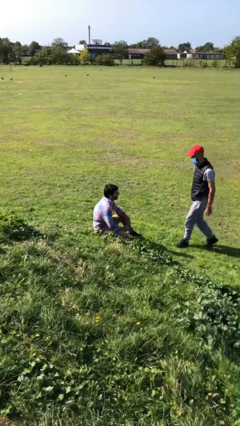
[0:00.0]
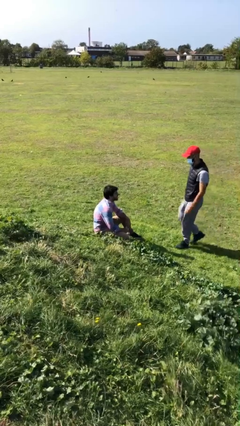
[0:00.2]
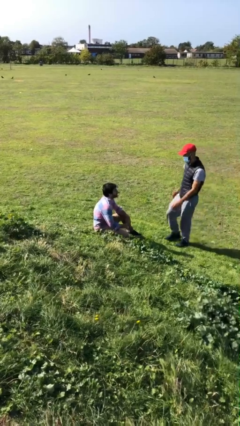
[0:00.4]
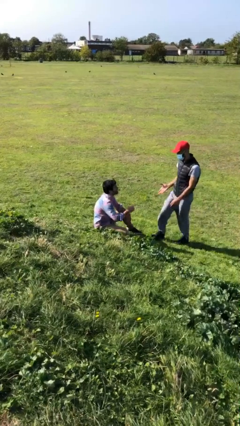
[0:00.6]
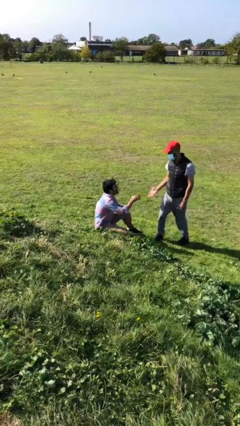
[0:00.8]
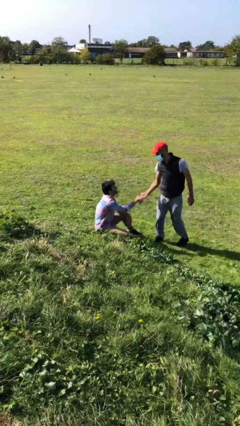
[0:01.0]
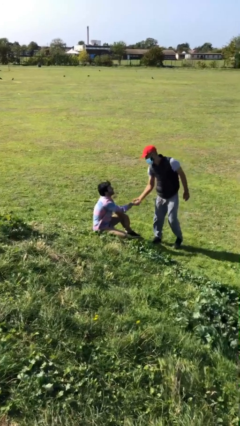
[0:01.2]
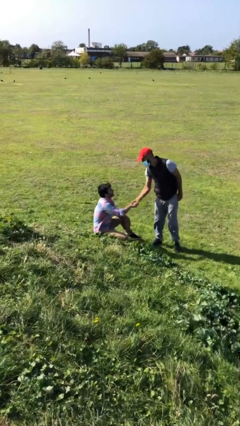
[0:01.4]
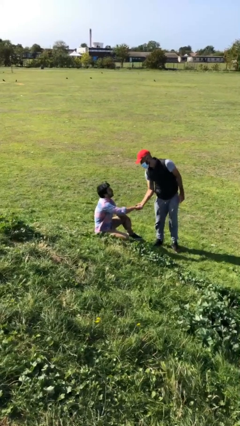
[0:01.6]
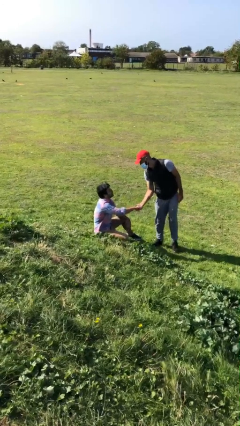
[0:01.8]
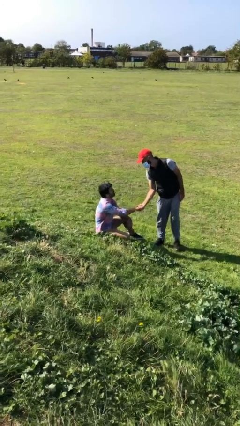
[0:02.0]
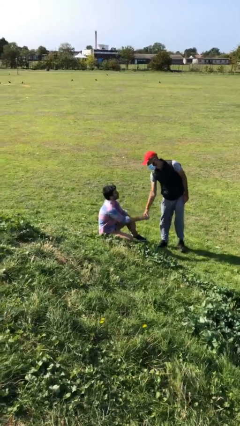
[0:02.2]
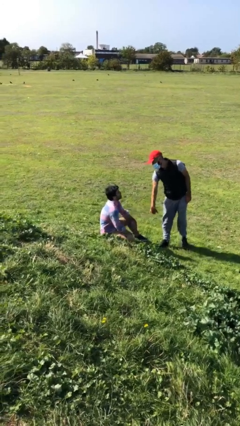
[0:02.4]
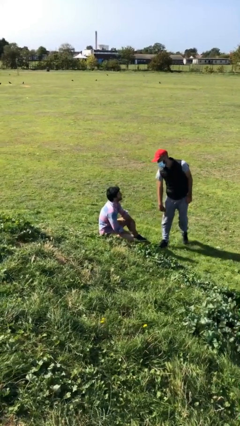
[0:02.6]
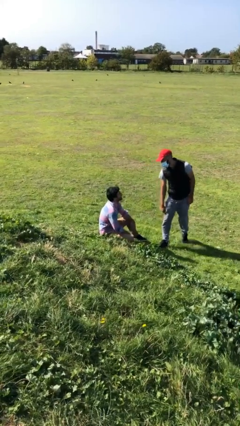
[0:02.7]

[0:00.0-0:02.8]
person shakes hand

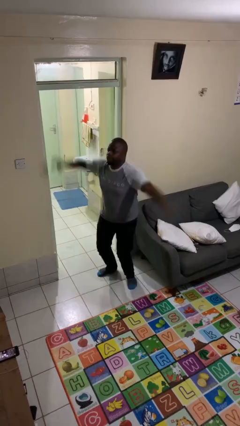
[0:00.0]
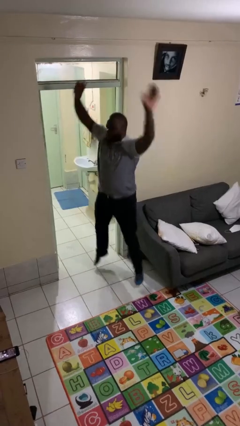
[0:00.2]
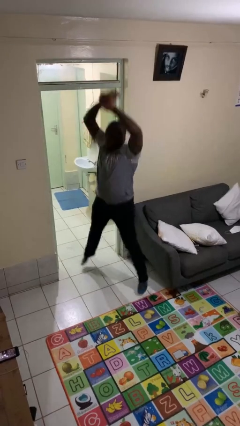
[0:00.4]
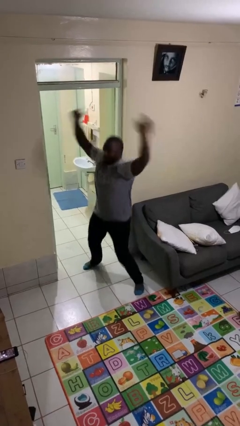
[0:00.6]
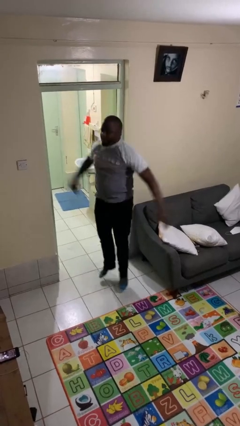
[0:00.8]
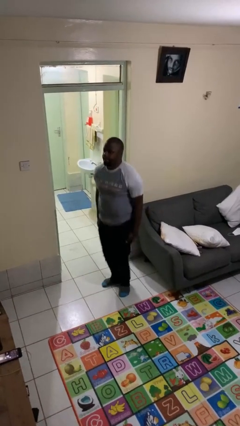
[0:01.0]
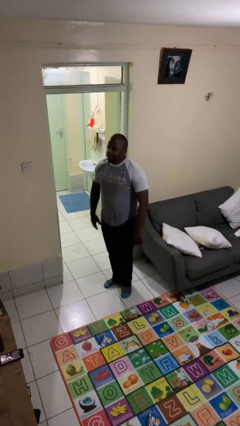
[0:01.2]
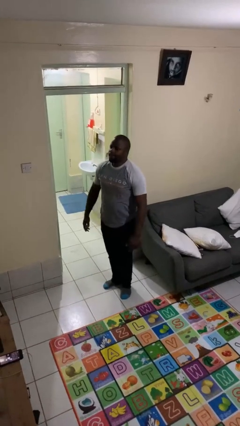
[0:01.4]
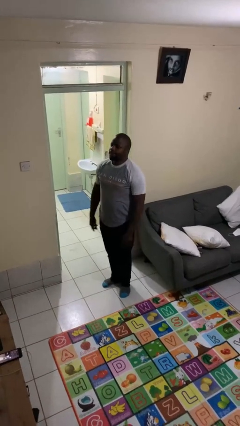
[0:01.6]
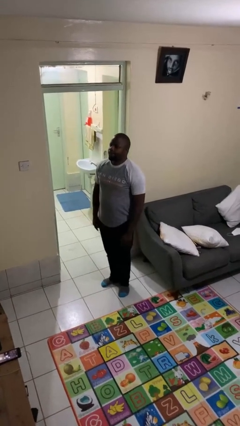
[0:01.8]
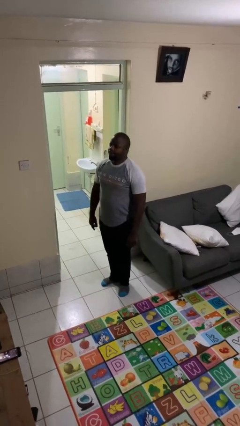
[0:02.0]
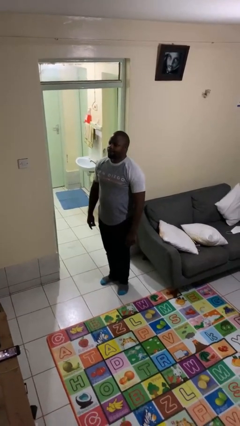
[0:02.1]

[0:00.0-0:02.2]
person exercises with jumping jacks

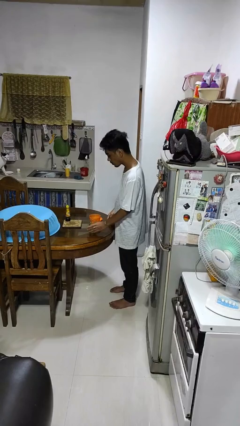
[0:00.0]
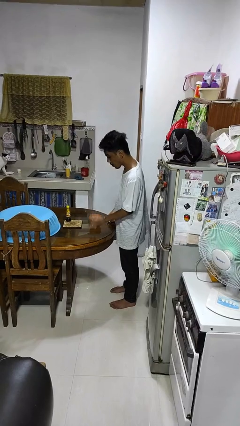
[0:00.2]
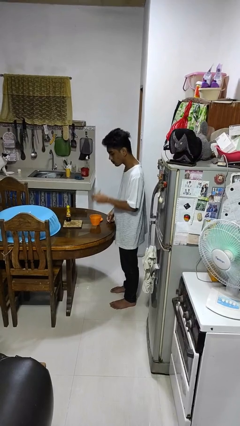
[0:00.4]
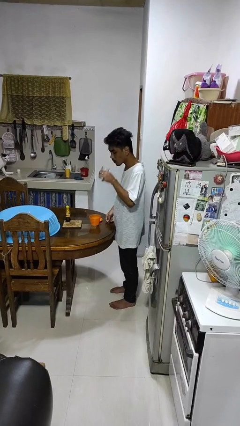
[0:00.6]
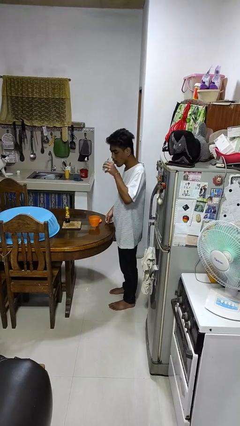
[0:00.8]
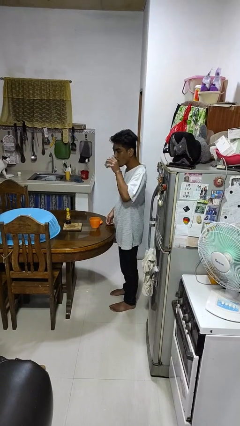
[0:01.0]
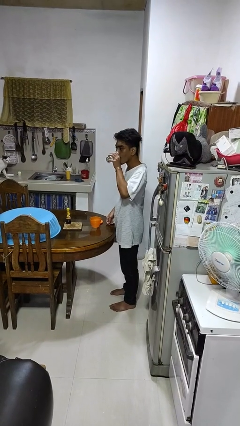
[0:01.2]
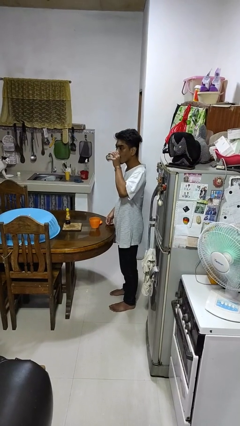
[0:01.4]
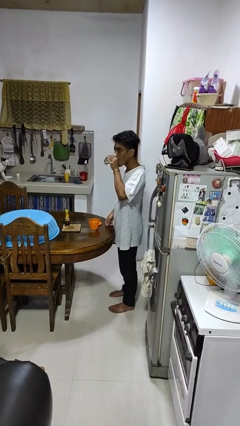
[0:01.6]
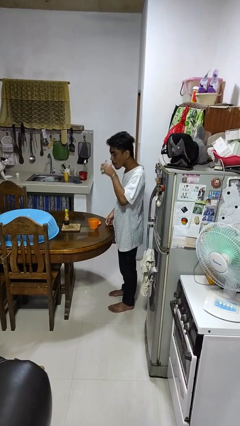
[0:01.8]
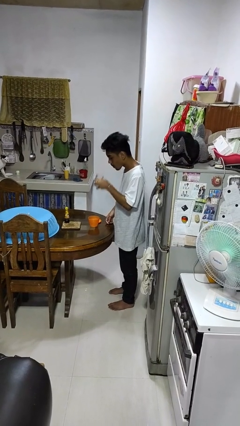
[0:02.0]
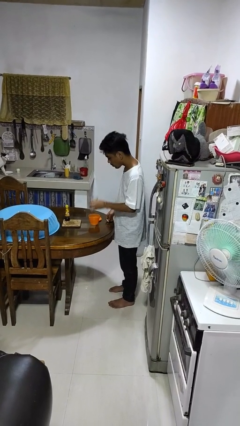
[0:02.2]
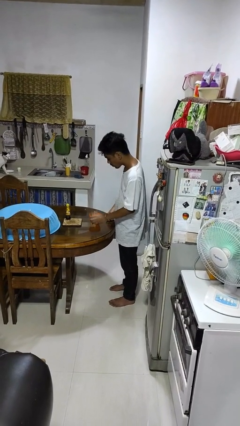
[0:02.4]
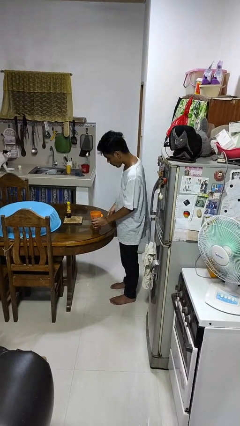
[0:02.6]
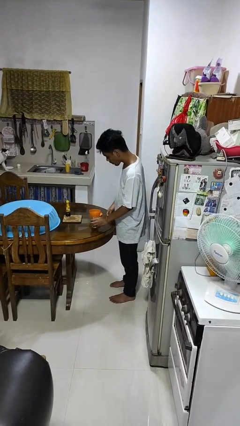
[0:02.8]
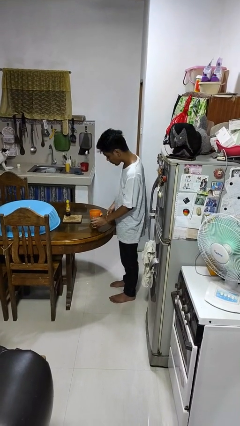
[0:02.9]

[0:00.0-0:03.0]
person drinks from cup

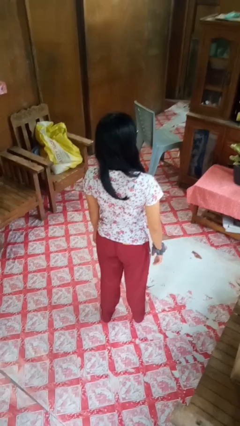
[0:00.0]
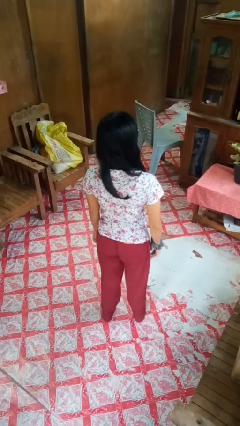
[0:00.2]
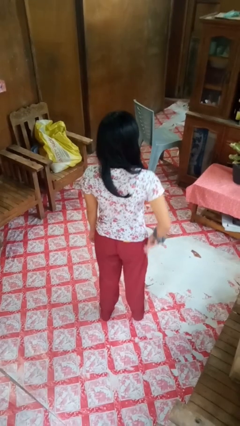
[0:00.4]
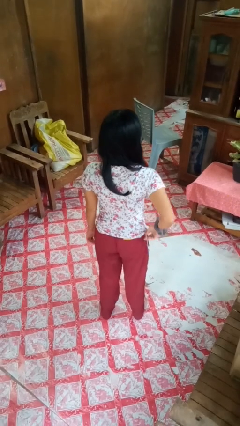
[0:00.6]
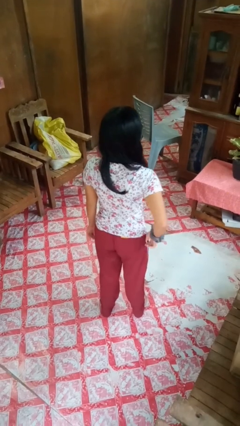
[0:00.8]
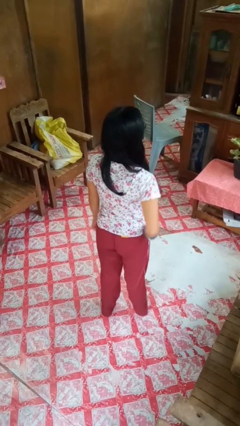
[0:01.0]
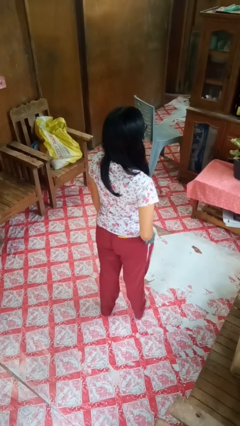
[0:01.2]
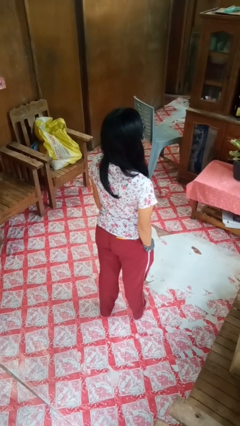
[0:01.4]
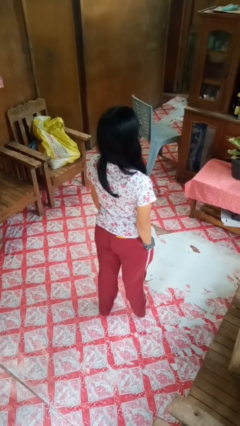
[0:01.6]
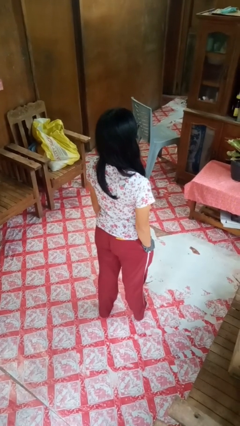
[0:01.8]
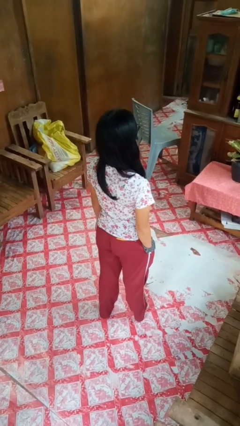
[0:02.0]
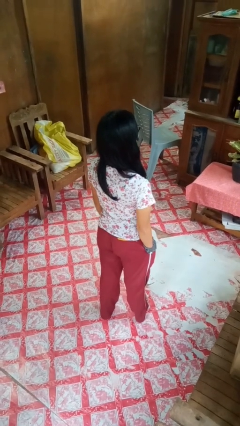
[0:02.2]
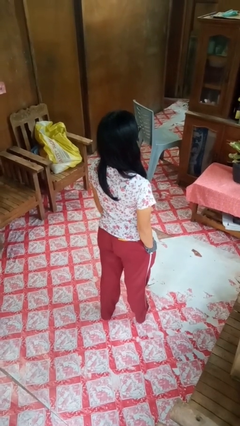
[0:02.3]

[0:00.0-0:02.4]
person puts hands in back pockets

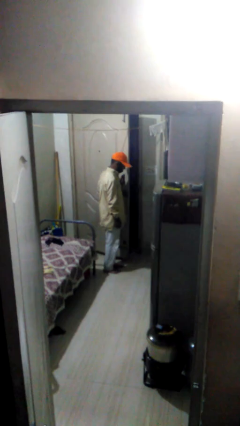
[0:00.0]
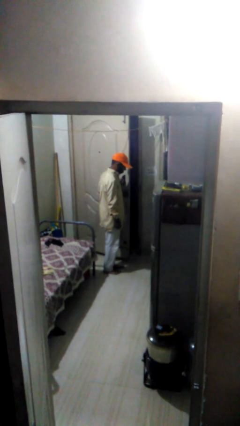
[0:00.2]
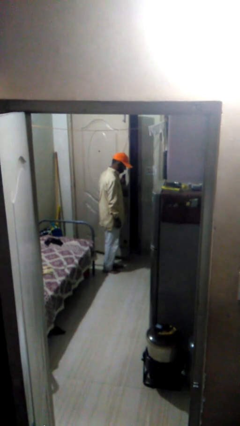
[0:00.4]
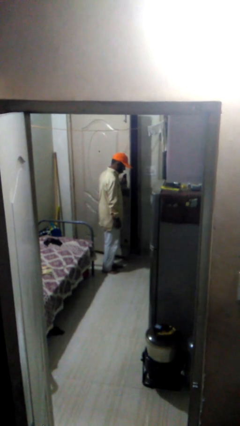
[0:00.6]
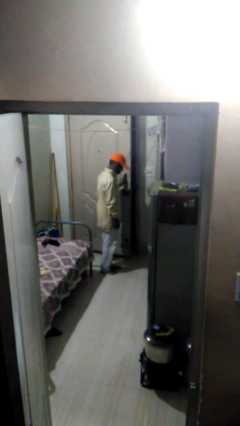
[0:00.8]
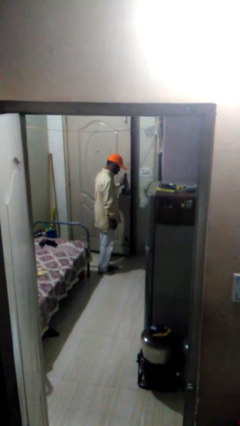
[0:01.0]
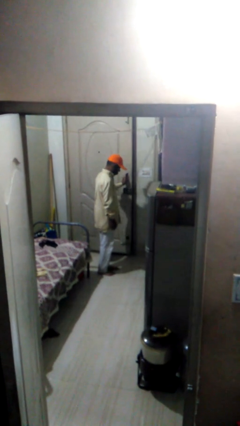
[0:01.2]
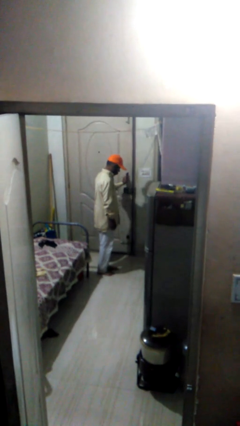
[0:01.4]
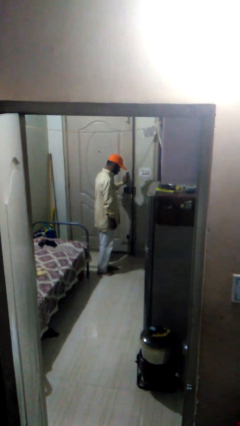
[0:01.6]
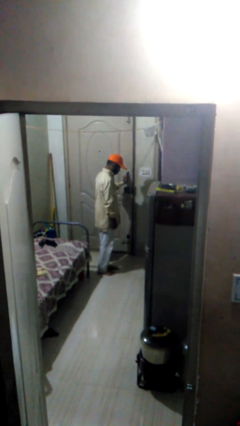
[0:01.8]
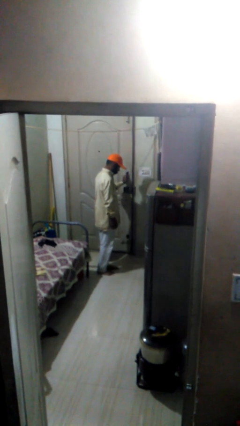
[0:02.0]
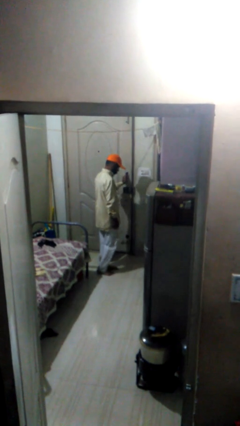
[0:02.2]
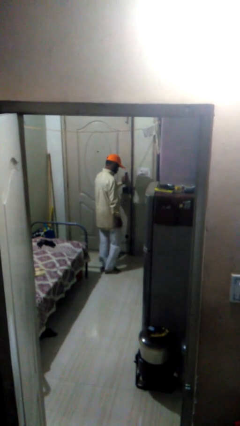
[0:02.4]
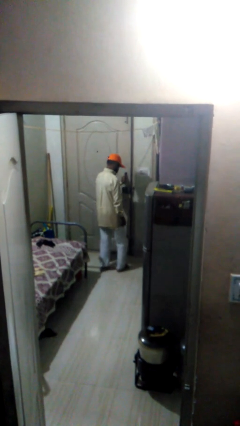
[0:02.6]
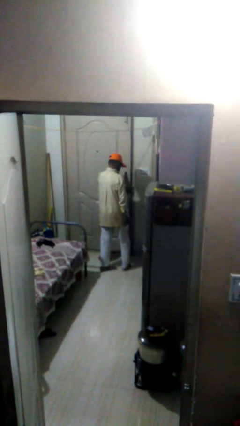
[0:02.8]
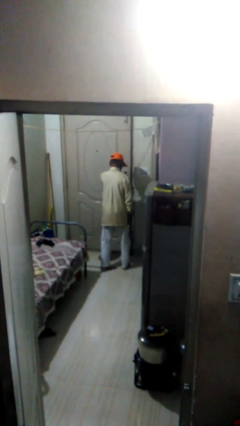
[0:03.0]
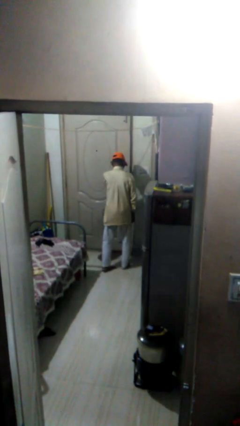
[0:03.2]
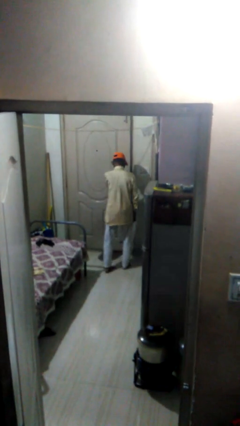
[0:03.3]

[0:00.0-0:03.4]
person closes facility door

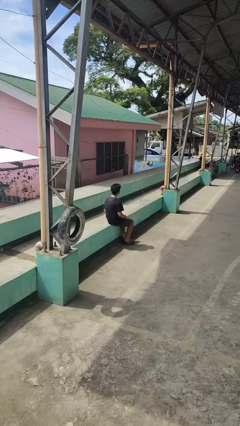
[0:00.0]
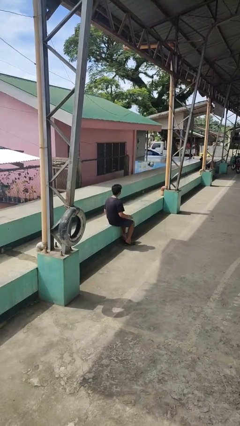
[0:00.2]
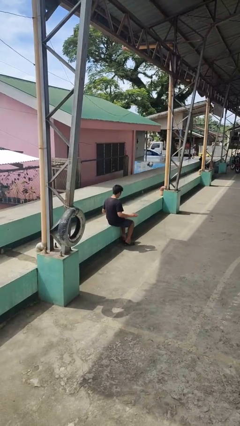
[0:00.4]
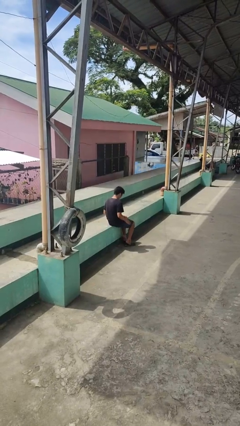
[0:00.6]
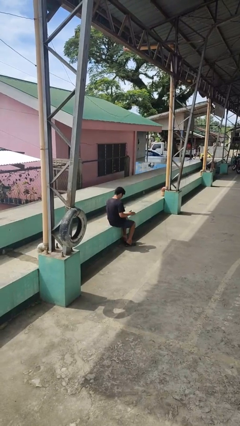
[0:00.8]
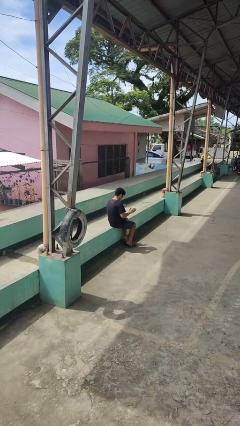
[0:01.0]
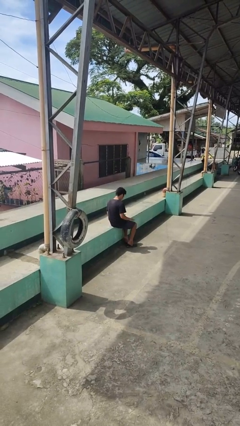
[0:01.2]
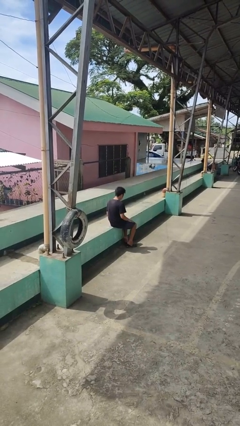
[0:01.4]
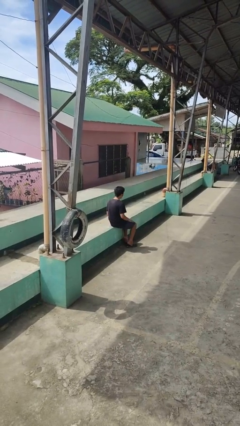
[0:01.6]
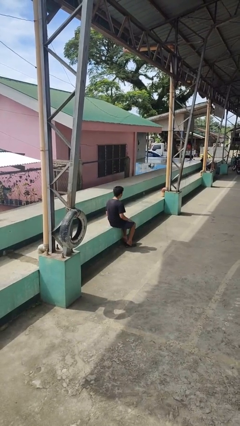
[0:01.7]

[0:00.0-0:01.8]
person slaps hands on thighs

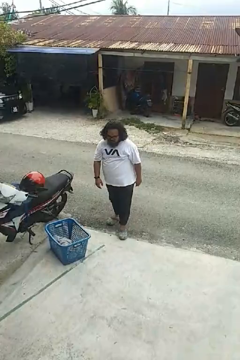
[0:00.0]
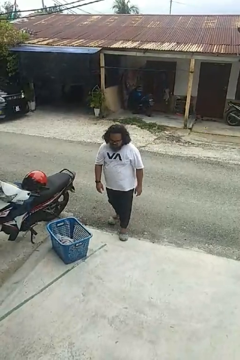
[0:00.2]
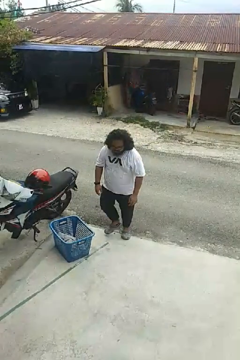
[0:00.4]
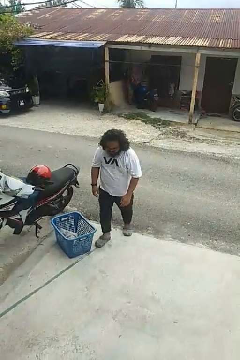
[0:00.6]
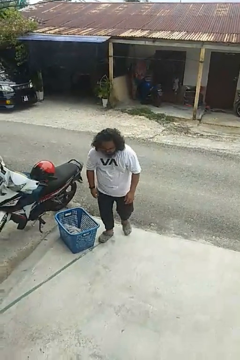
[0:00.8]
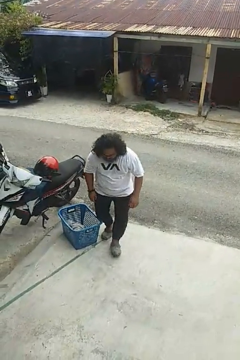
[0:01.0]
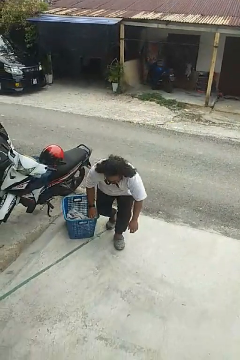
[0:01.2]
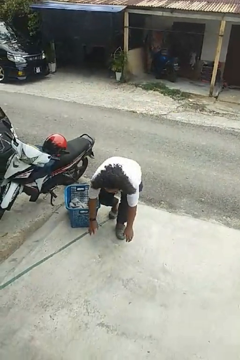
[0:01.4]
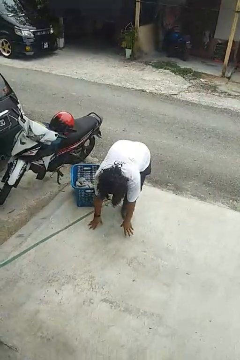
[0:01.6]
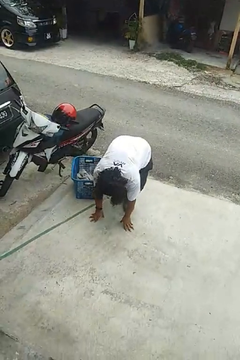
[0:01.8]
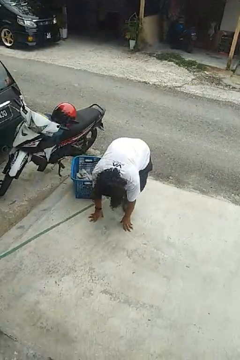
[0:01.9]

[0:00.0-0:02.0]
person trips on object on floor
